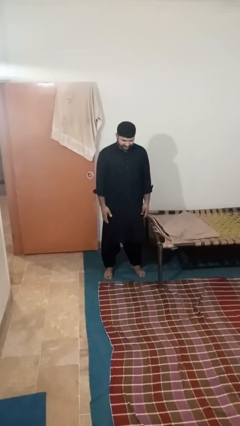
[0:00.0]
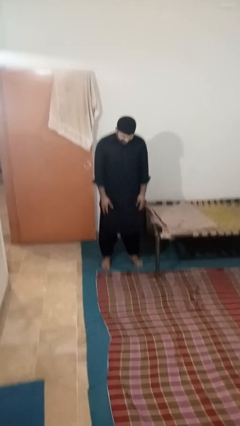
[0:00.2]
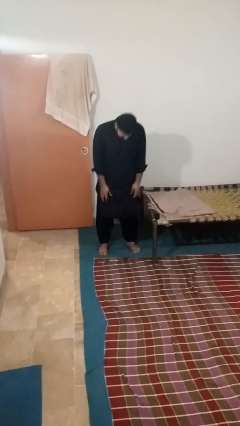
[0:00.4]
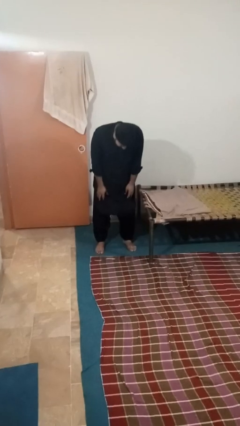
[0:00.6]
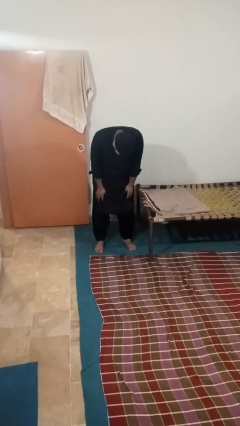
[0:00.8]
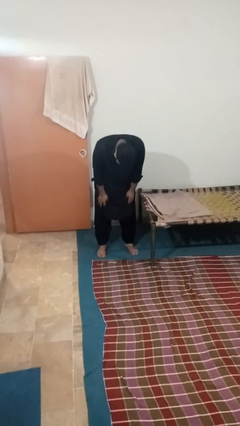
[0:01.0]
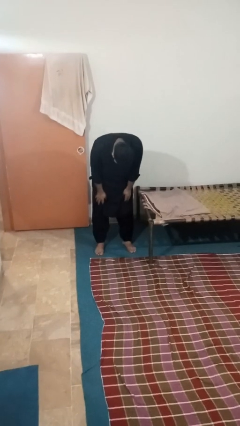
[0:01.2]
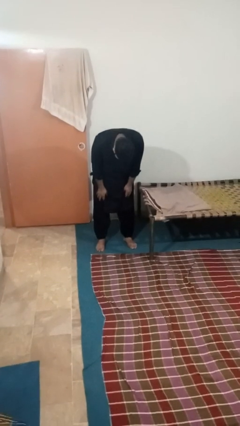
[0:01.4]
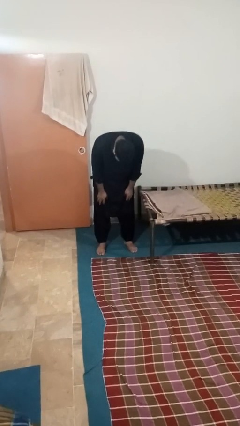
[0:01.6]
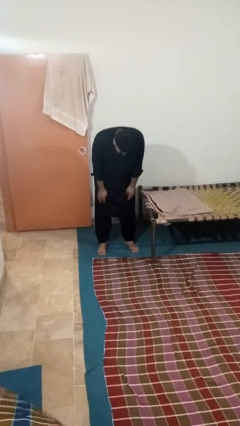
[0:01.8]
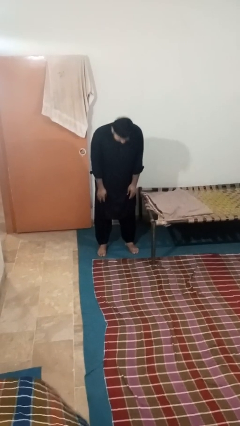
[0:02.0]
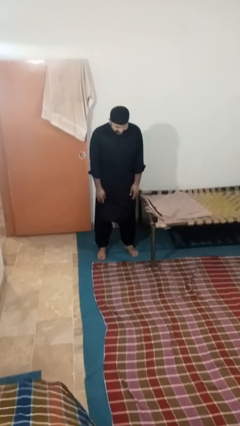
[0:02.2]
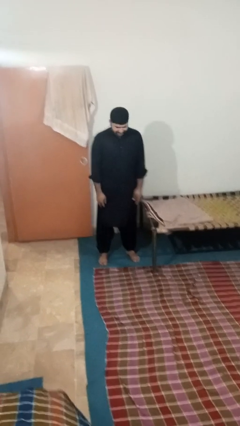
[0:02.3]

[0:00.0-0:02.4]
person bows

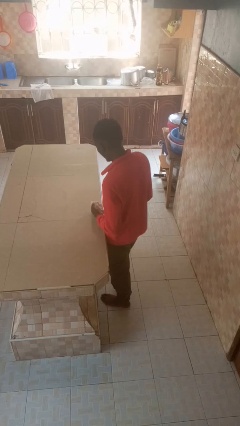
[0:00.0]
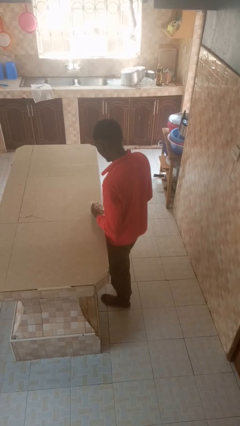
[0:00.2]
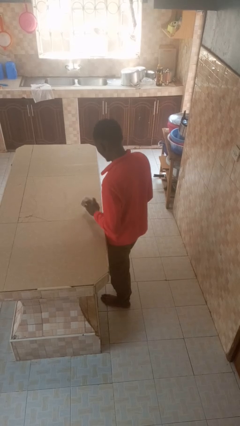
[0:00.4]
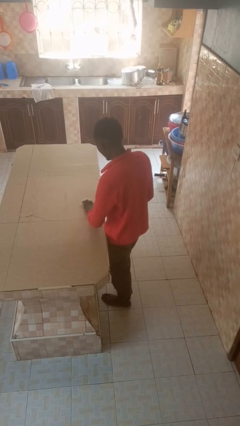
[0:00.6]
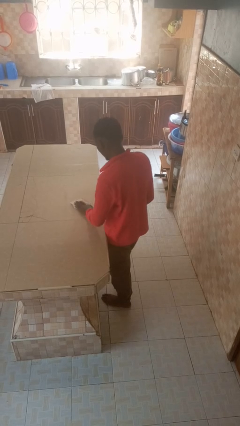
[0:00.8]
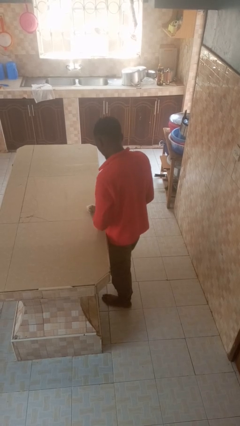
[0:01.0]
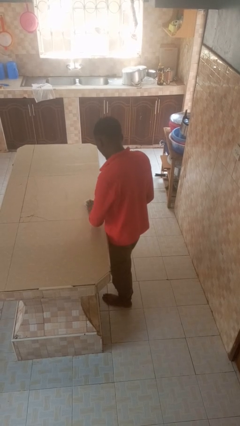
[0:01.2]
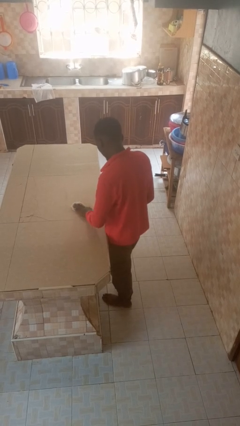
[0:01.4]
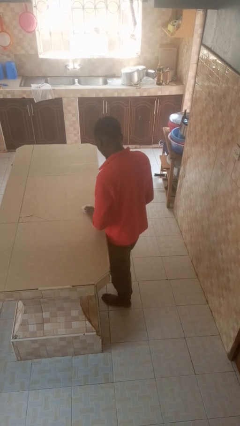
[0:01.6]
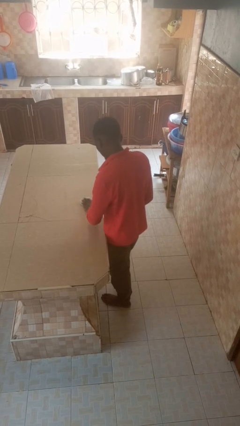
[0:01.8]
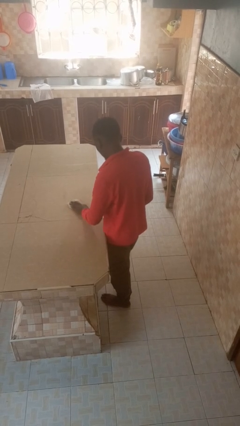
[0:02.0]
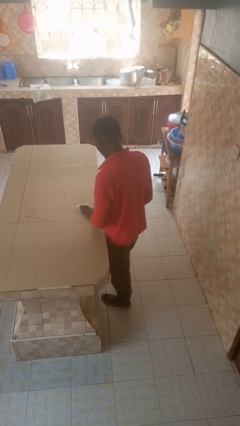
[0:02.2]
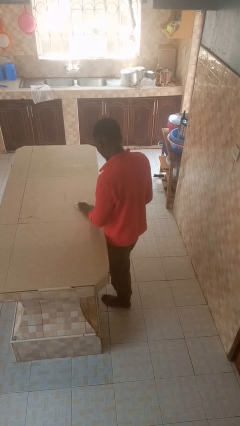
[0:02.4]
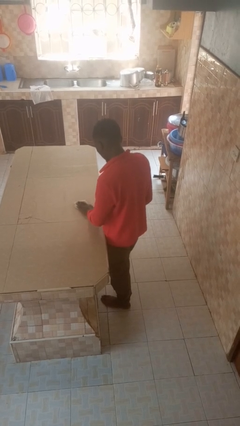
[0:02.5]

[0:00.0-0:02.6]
person cleans table with rag

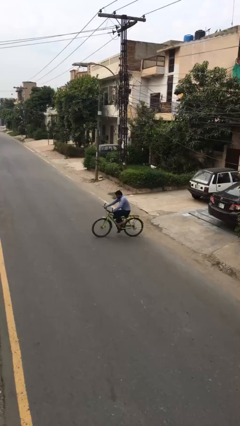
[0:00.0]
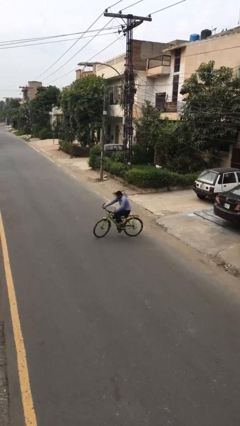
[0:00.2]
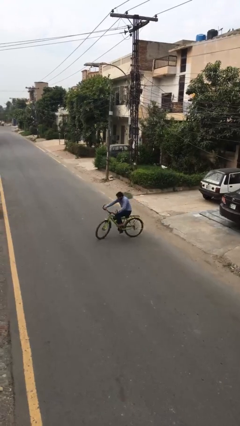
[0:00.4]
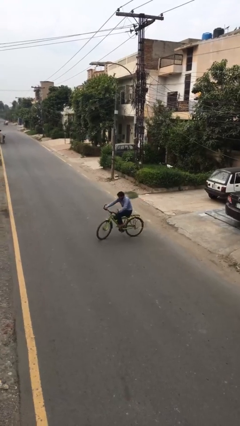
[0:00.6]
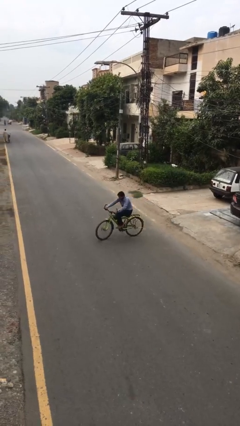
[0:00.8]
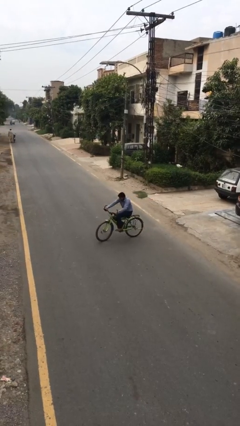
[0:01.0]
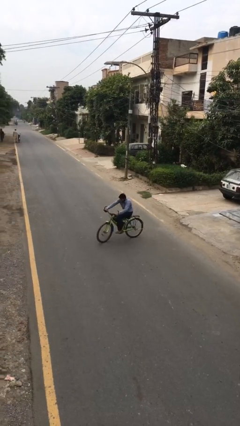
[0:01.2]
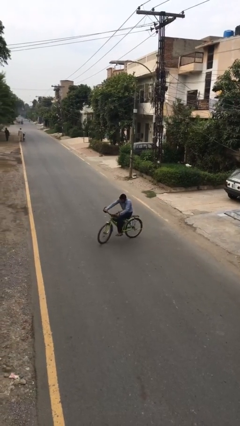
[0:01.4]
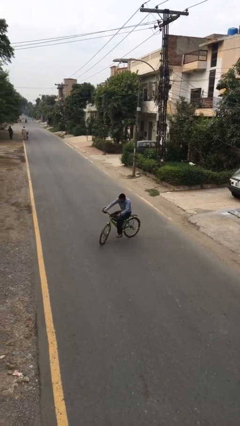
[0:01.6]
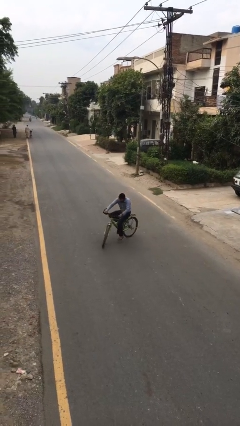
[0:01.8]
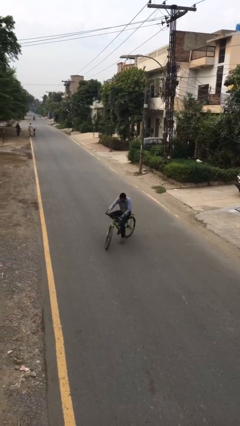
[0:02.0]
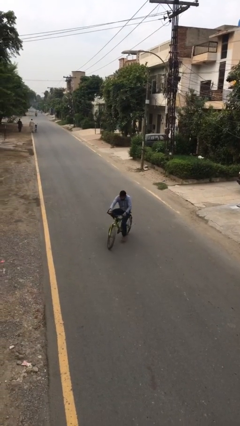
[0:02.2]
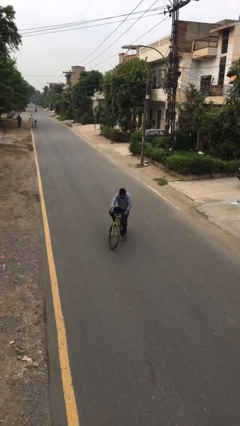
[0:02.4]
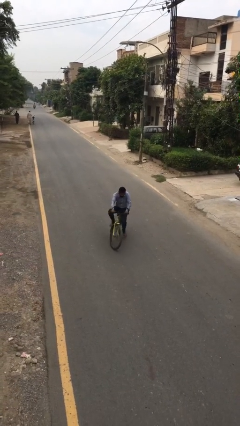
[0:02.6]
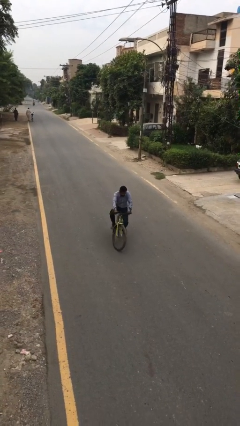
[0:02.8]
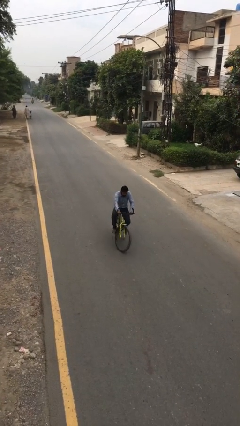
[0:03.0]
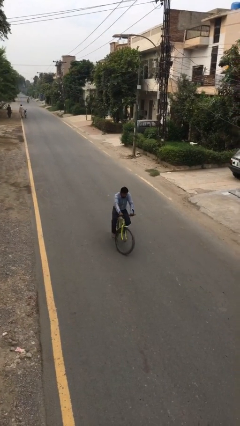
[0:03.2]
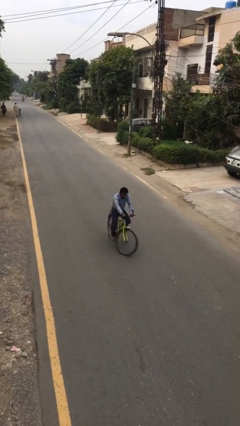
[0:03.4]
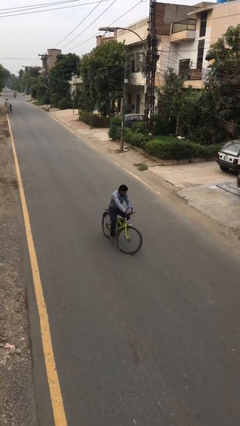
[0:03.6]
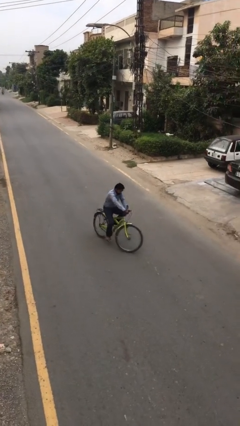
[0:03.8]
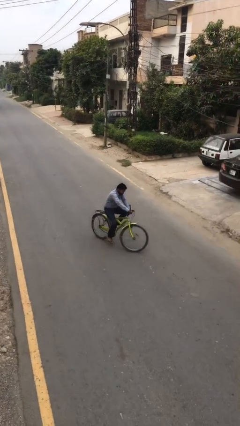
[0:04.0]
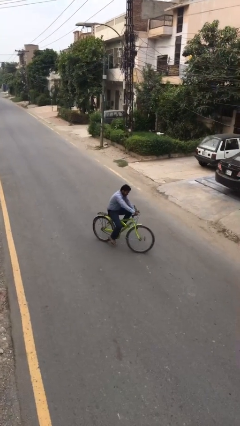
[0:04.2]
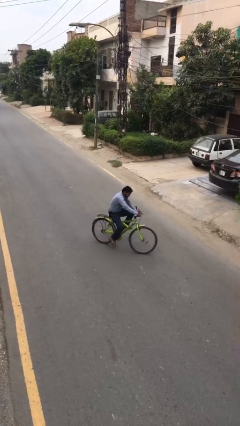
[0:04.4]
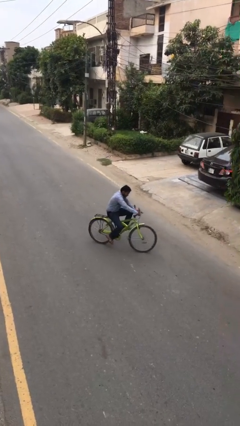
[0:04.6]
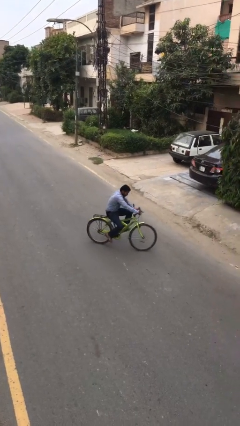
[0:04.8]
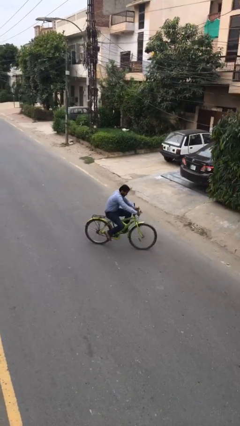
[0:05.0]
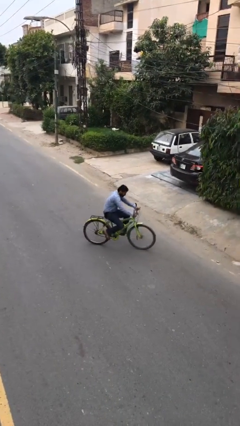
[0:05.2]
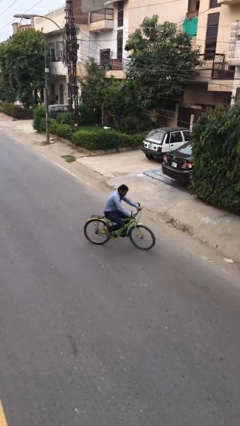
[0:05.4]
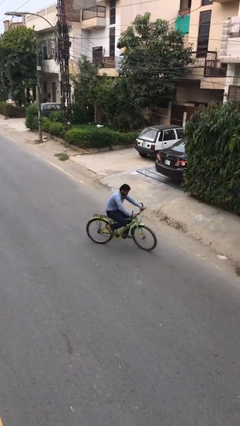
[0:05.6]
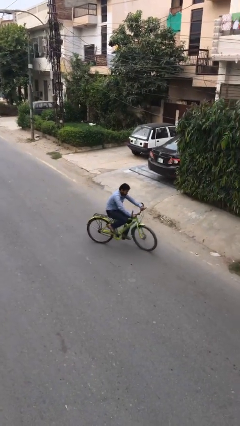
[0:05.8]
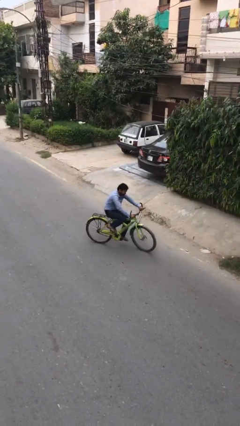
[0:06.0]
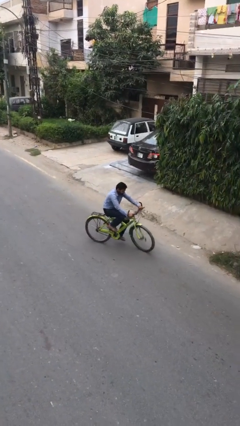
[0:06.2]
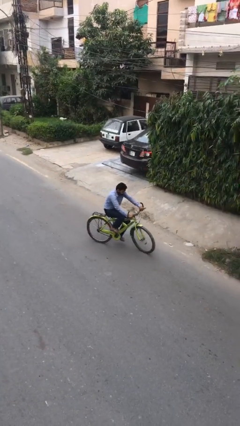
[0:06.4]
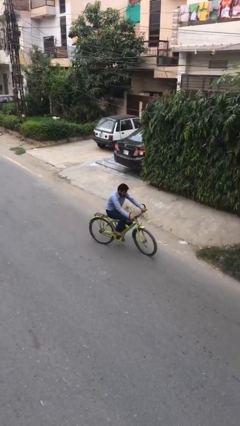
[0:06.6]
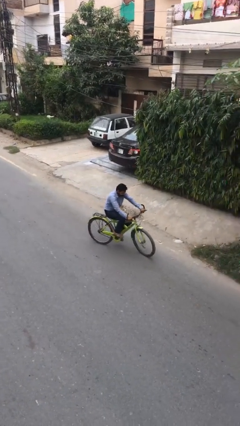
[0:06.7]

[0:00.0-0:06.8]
person rides bicycle

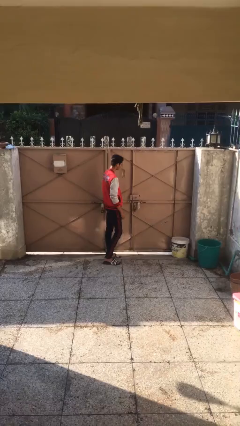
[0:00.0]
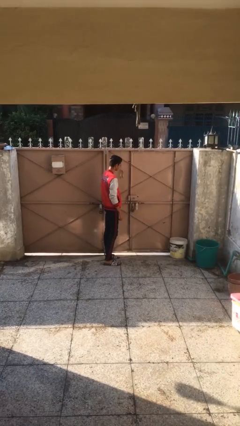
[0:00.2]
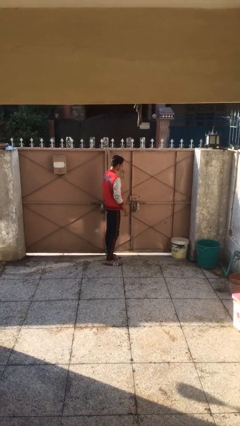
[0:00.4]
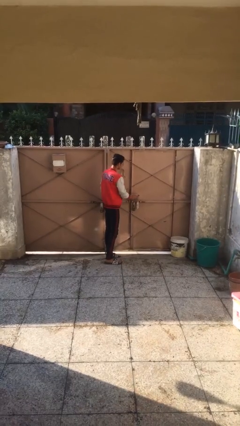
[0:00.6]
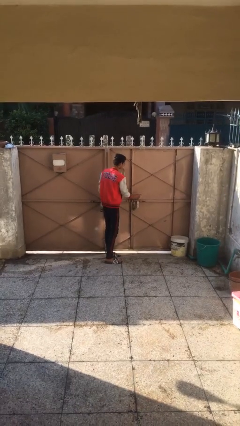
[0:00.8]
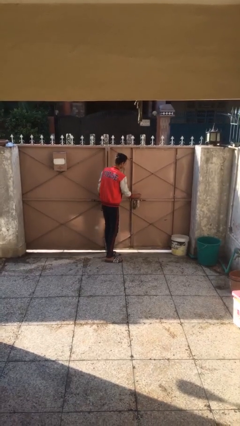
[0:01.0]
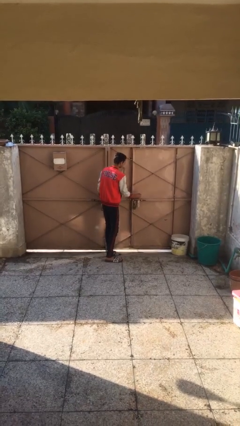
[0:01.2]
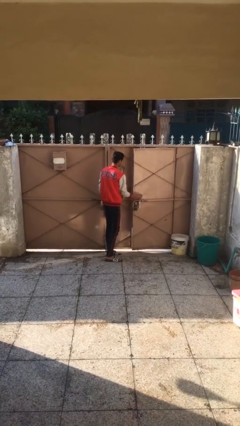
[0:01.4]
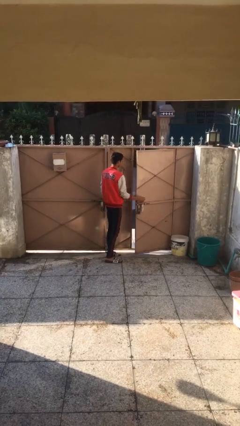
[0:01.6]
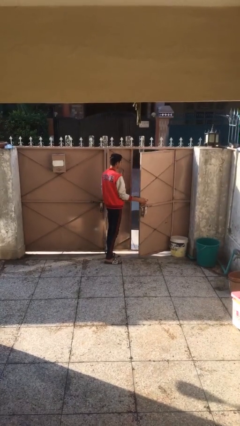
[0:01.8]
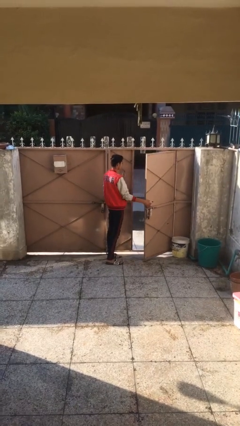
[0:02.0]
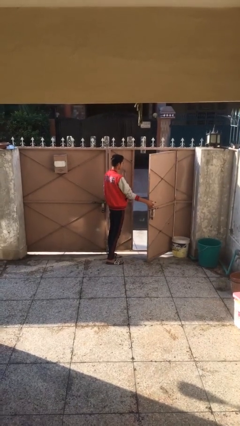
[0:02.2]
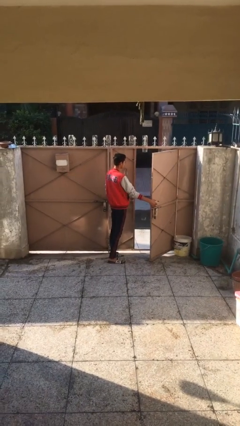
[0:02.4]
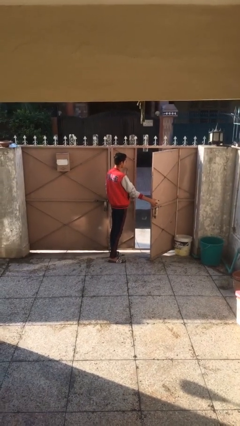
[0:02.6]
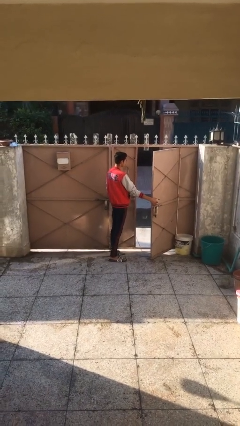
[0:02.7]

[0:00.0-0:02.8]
person opens facility door

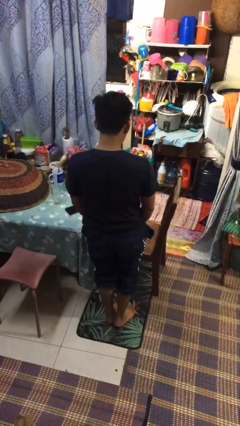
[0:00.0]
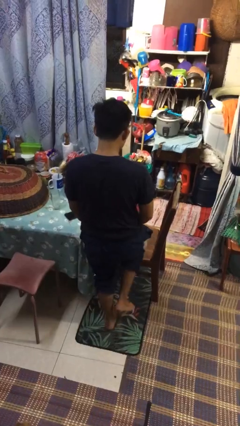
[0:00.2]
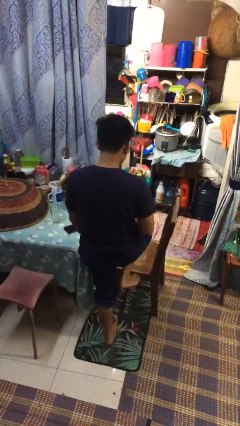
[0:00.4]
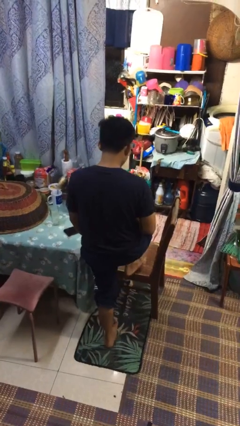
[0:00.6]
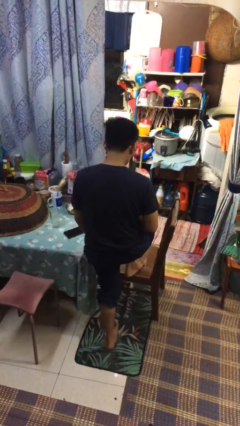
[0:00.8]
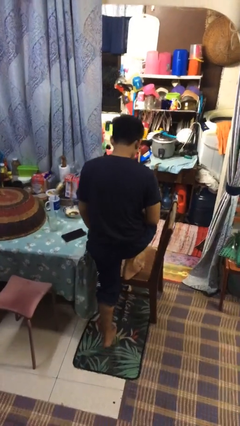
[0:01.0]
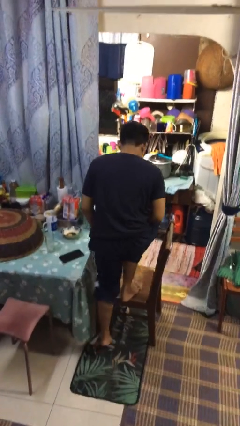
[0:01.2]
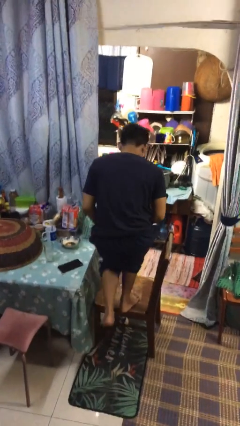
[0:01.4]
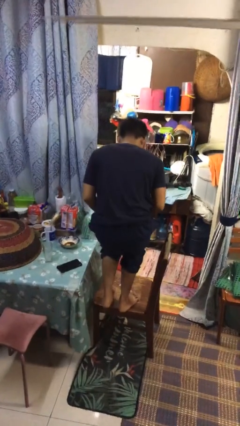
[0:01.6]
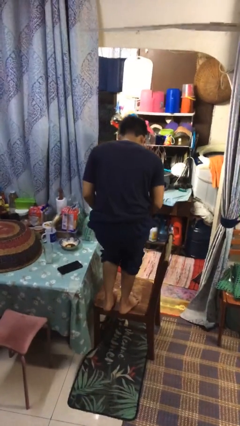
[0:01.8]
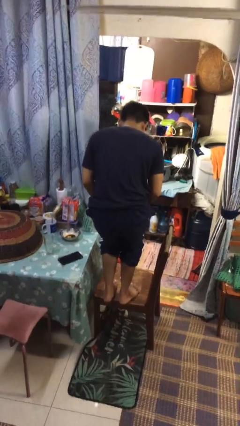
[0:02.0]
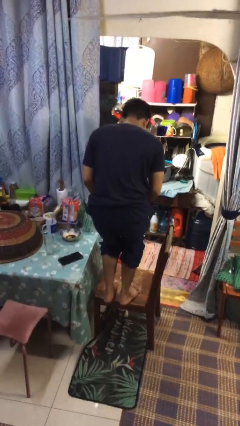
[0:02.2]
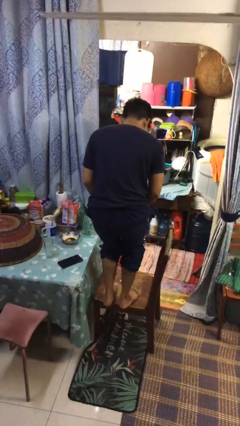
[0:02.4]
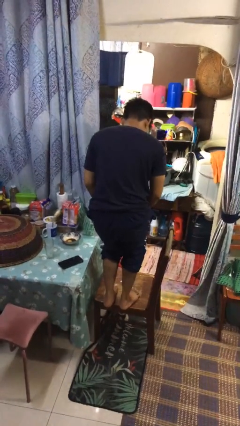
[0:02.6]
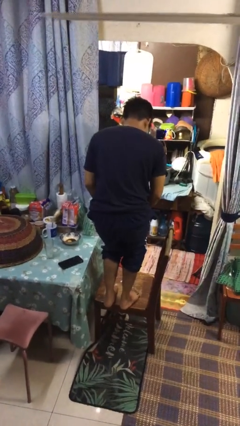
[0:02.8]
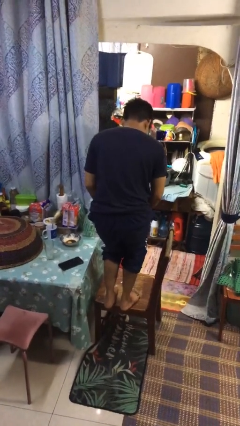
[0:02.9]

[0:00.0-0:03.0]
person climbs on chair
